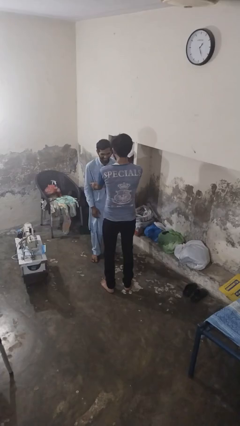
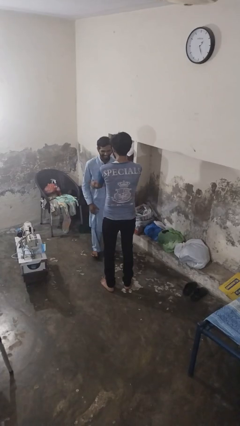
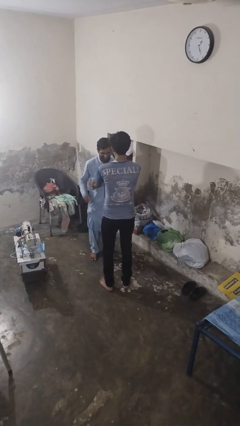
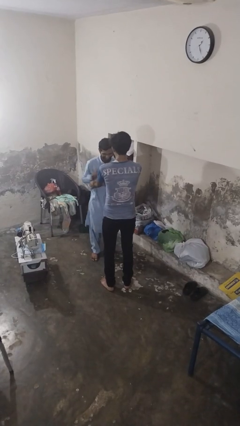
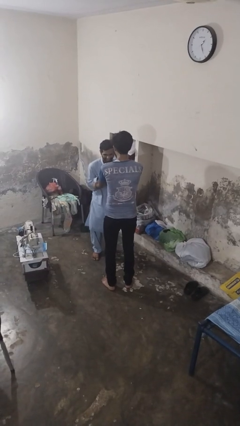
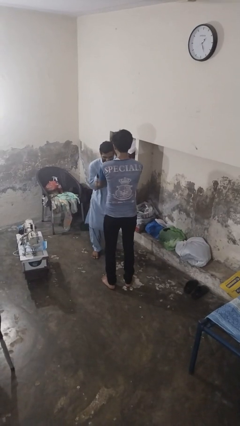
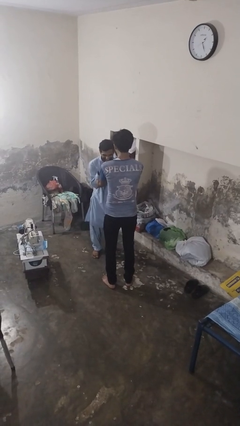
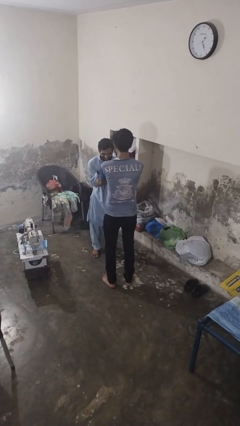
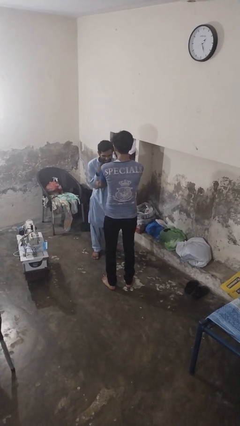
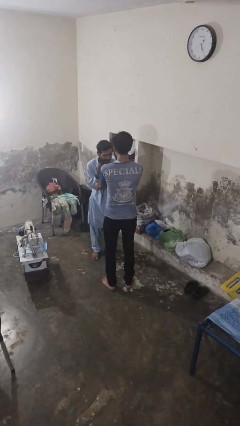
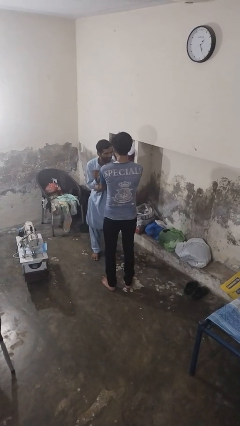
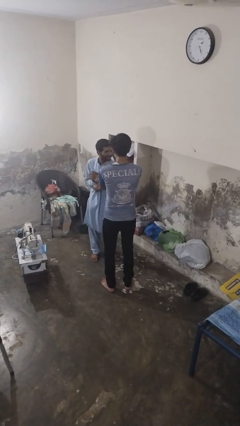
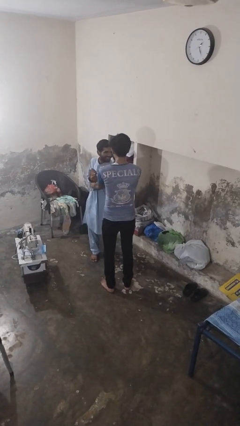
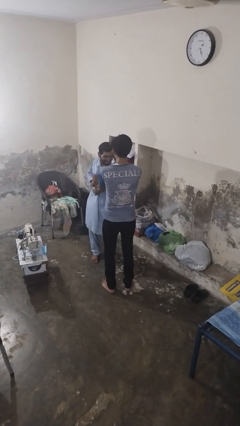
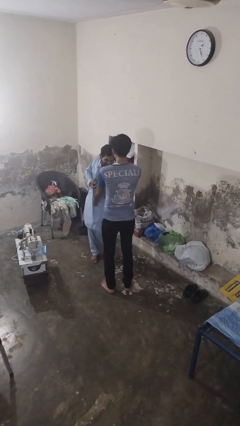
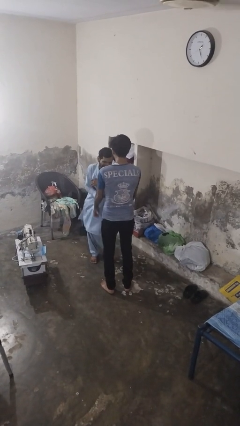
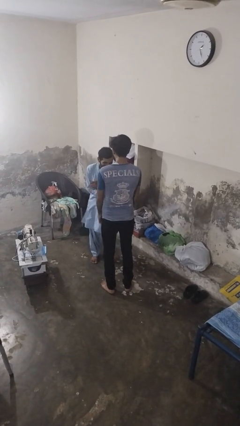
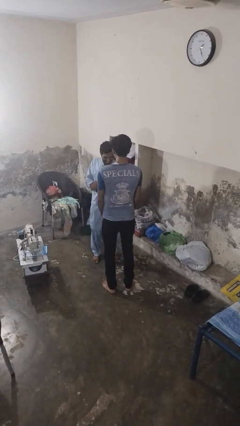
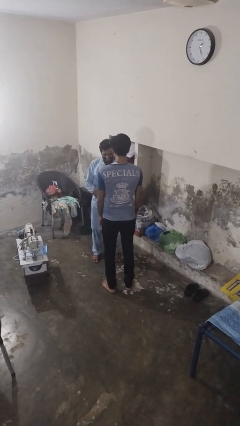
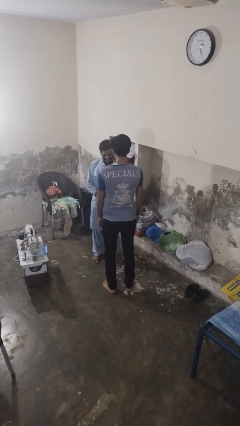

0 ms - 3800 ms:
person tickles person

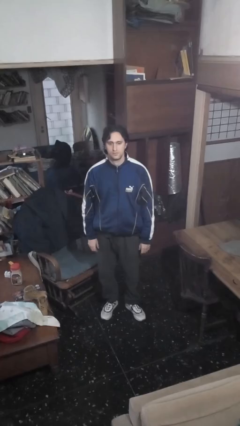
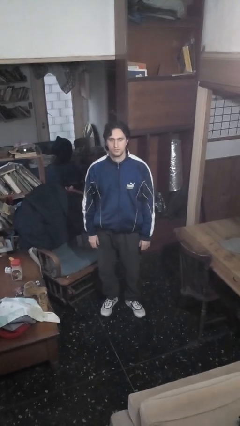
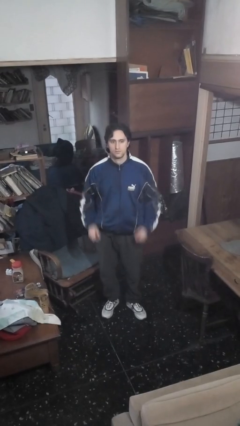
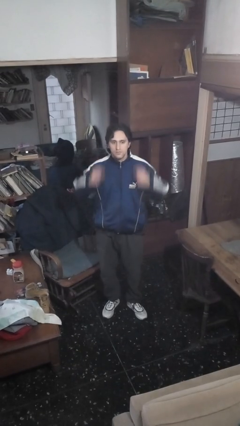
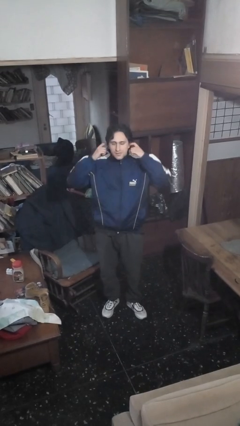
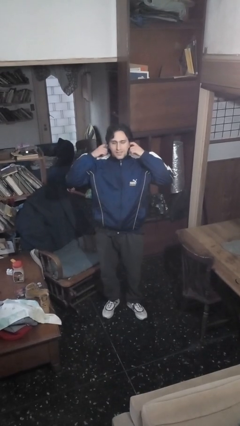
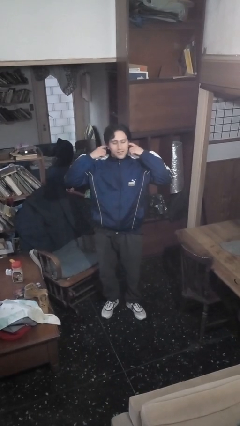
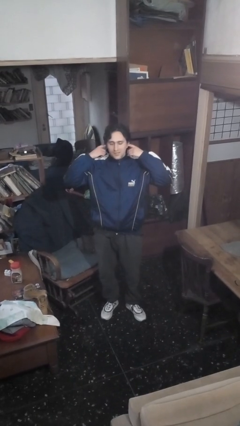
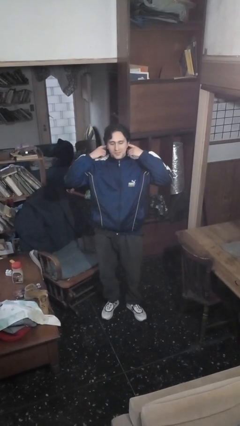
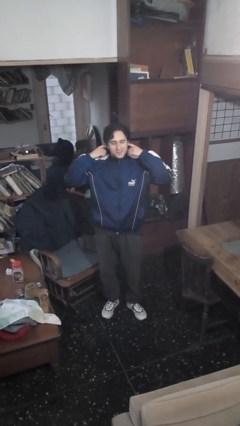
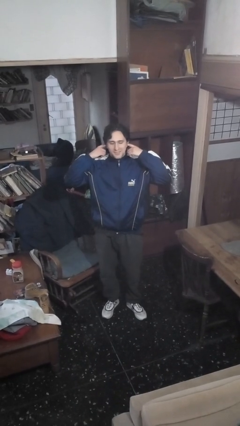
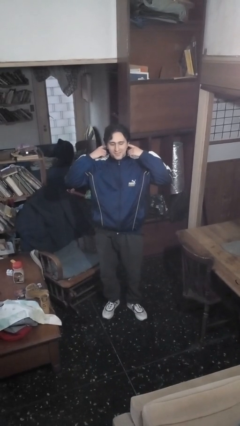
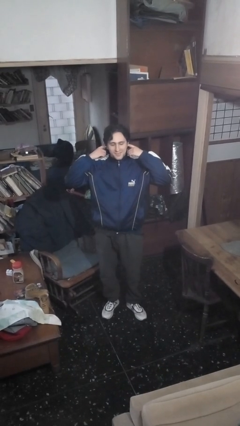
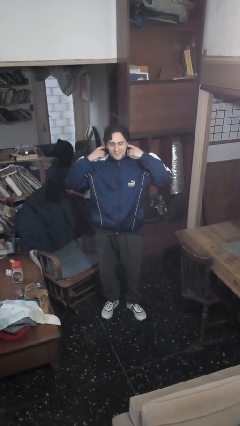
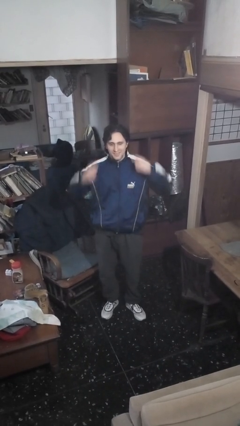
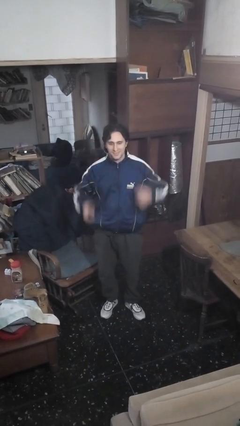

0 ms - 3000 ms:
person puts fingers in ear

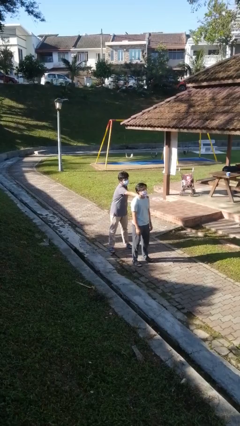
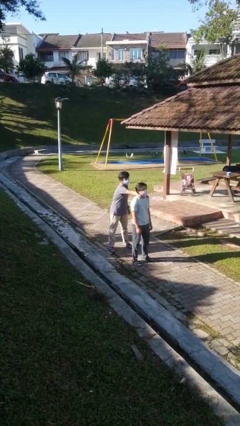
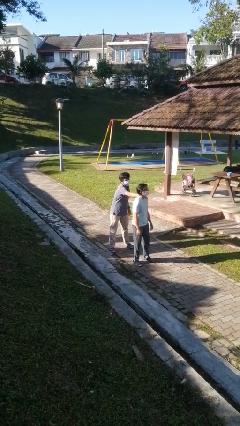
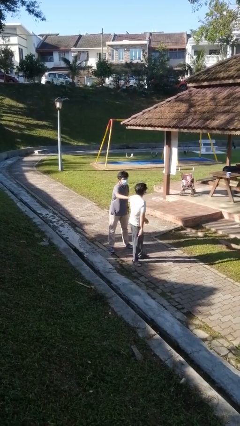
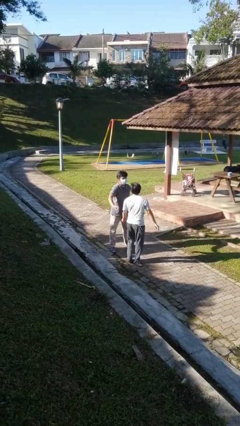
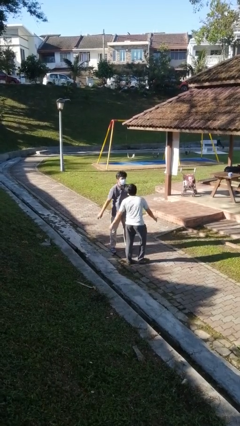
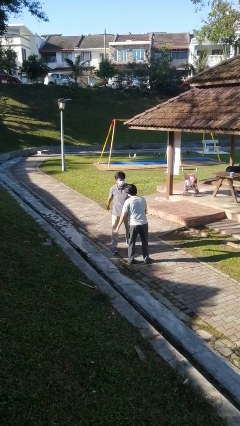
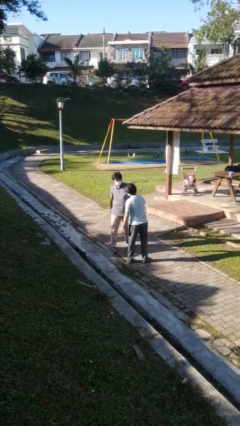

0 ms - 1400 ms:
person spins person around

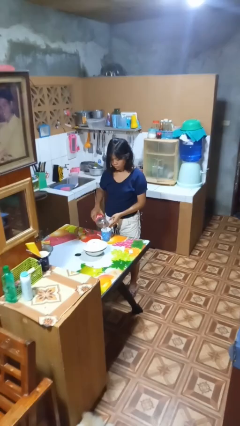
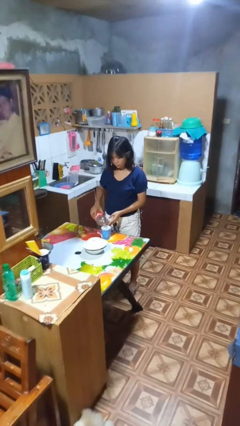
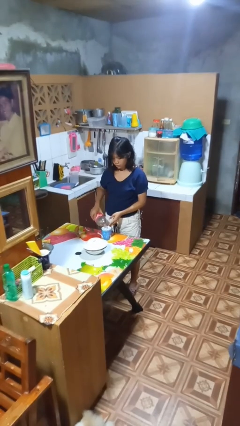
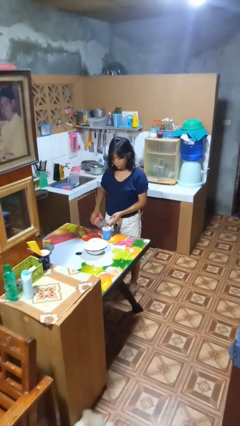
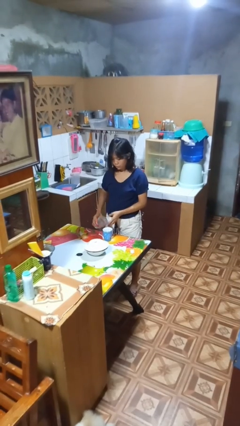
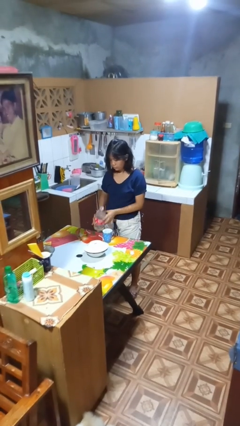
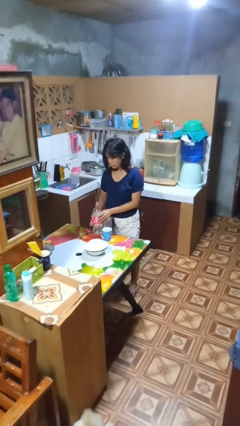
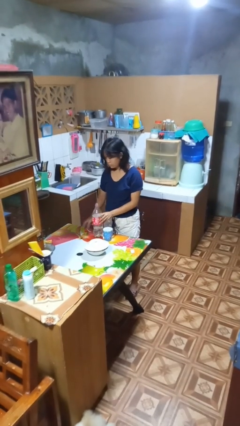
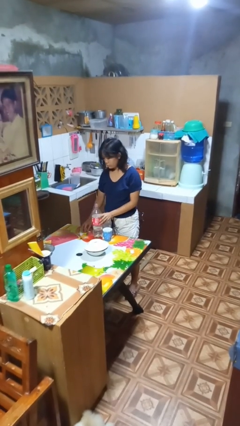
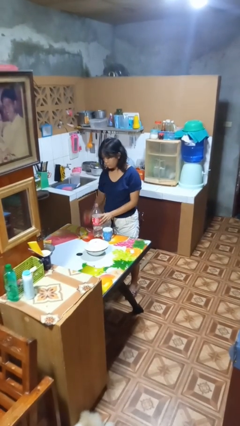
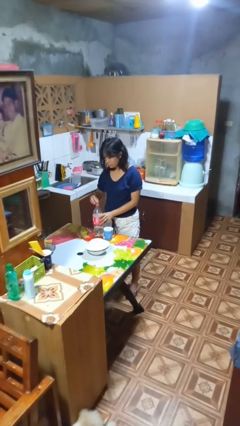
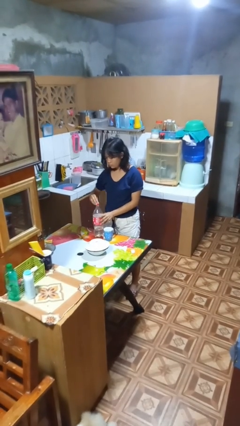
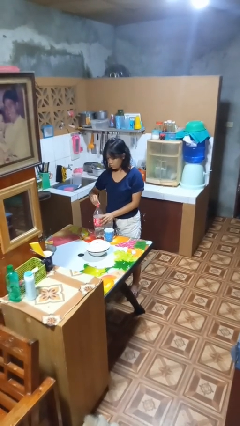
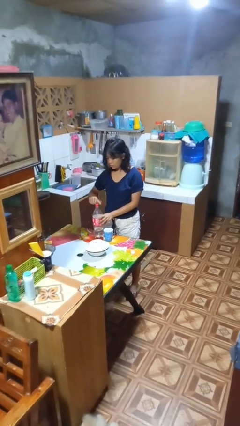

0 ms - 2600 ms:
person pours liquid into cup

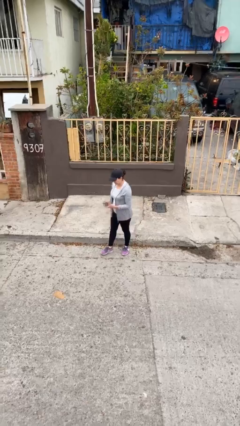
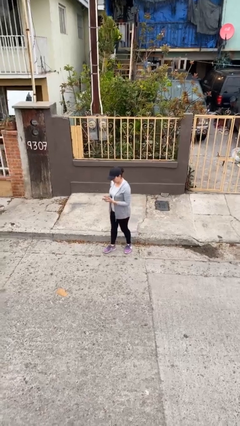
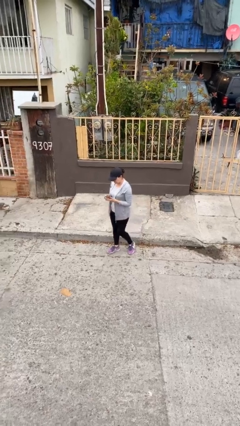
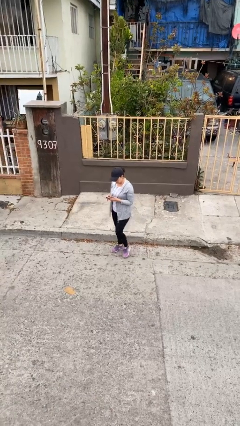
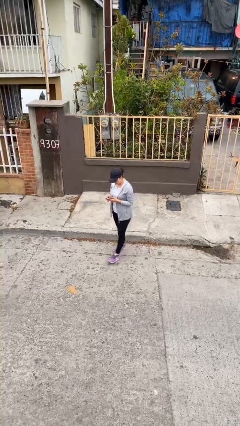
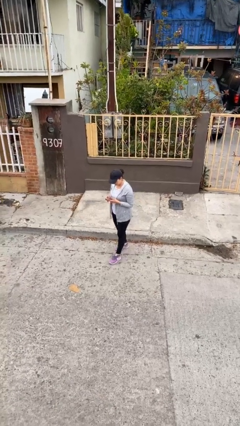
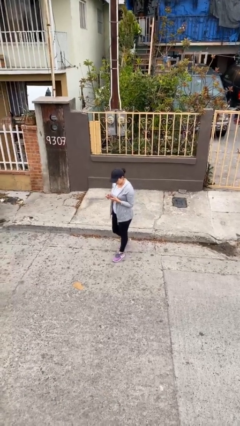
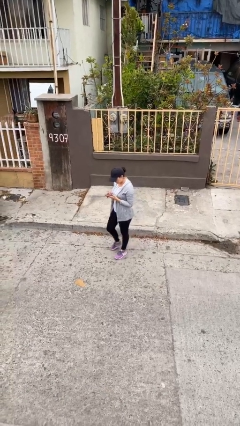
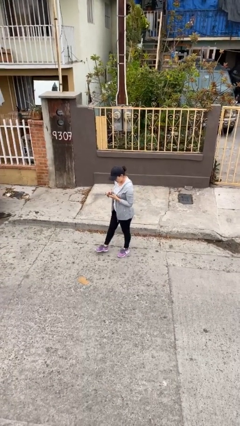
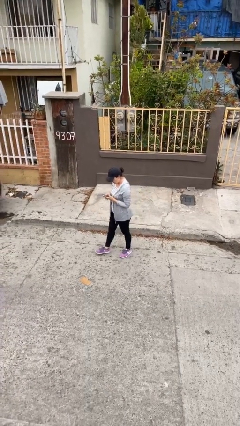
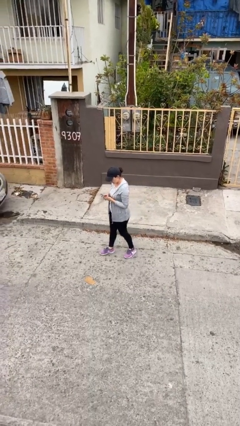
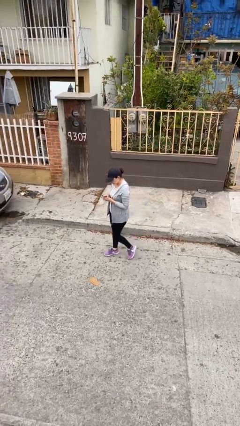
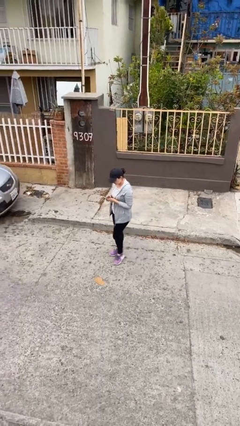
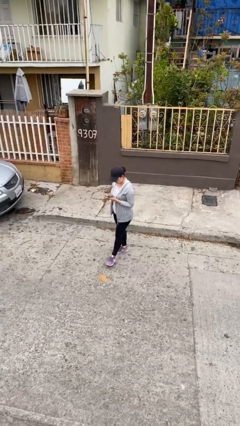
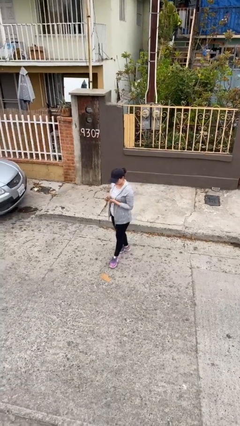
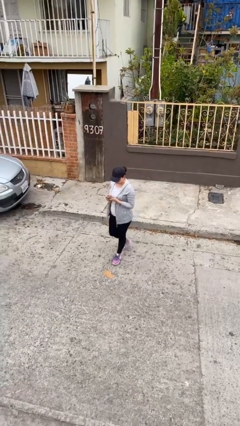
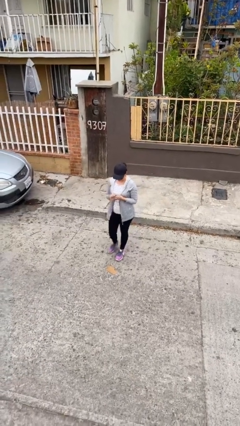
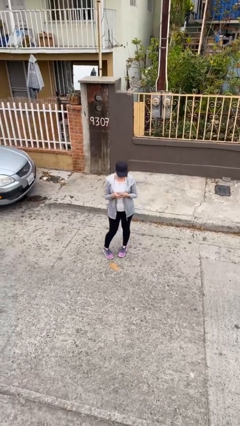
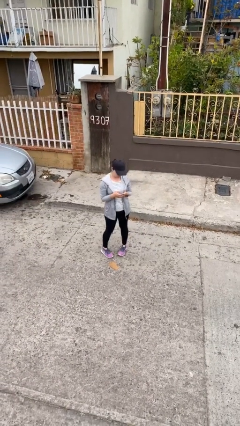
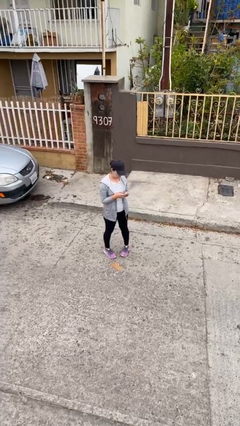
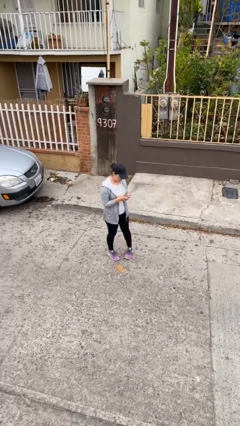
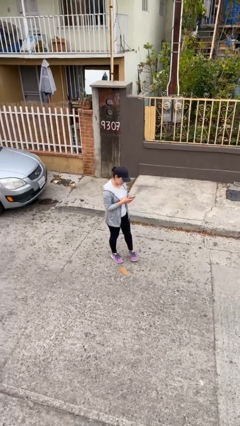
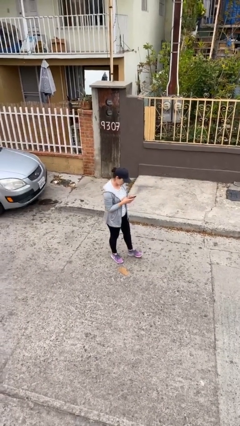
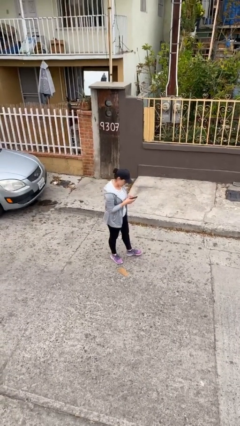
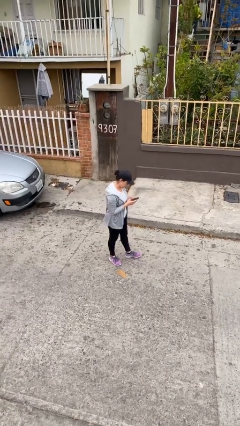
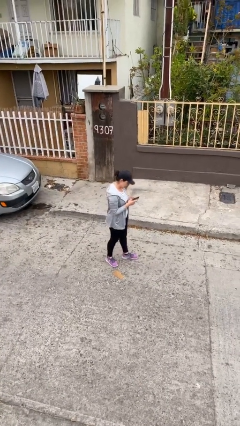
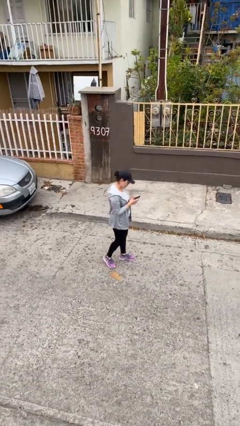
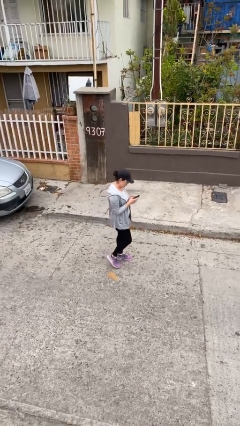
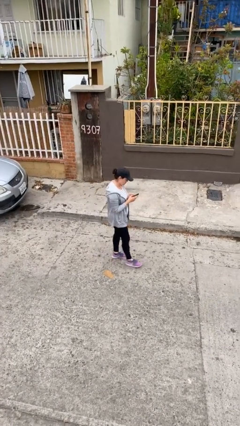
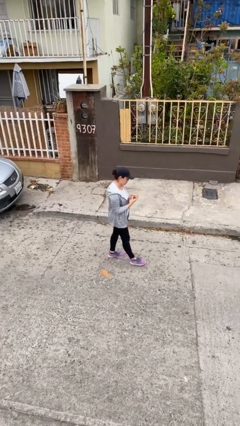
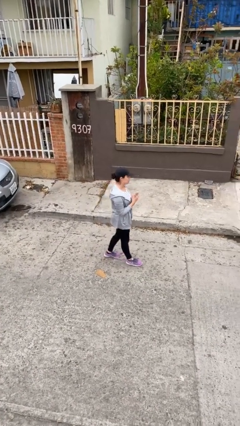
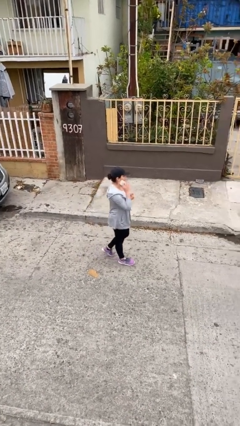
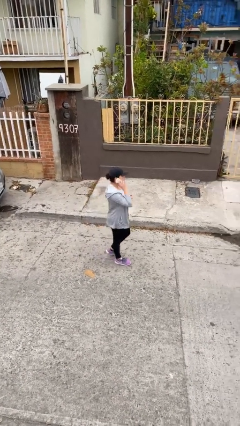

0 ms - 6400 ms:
person texts on phone

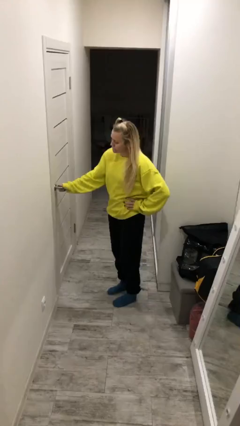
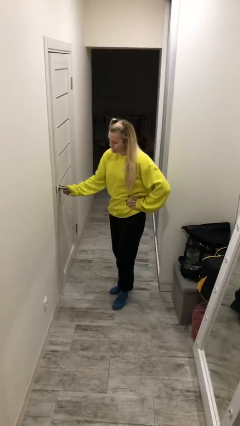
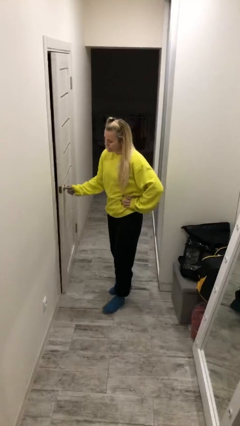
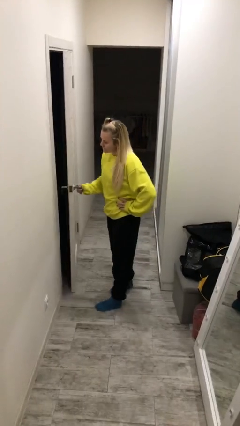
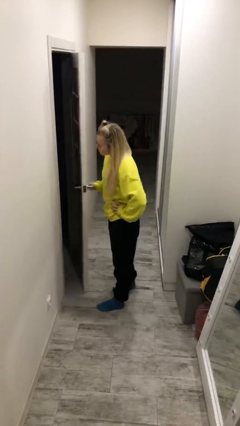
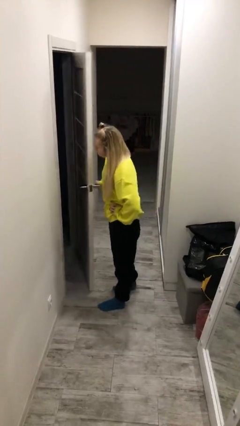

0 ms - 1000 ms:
person opens facility door
